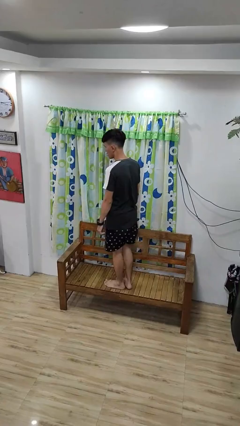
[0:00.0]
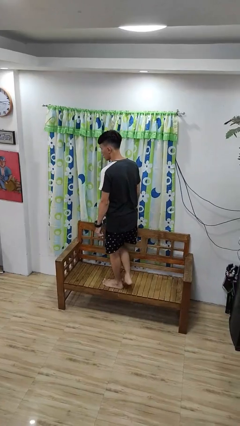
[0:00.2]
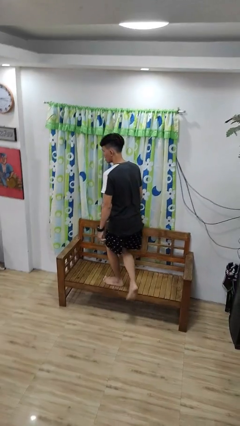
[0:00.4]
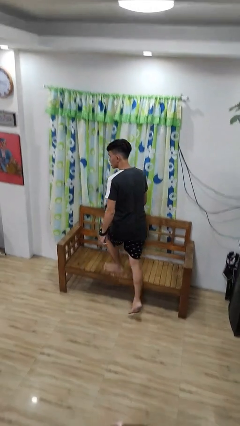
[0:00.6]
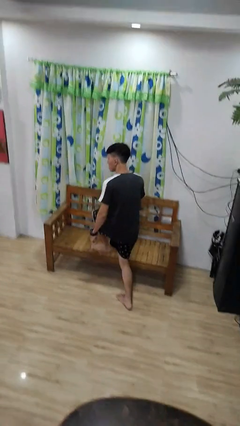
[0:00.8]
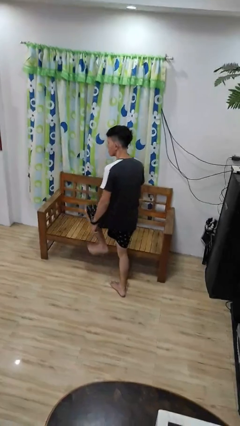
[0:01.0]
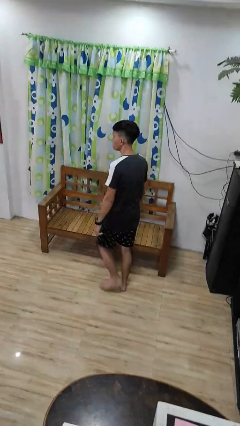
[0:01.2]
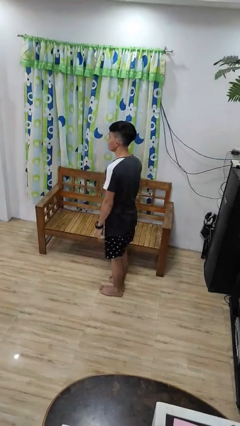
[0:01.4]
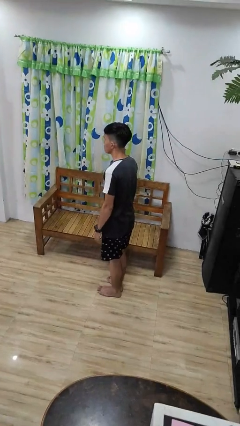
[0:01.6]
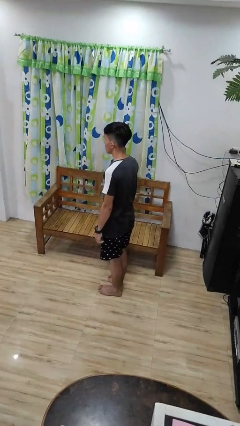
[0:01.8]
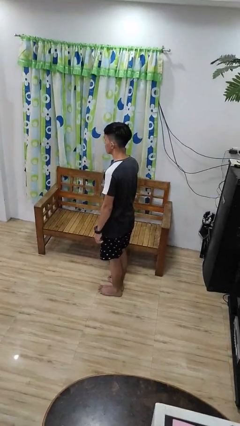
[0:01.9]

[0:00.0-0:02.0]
person climbs off couch

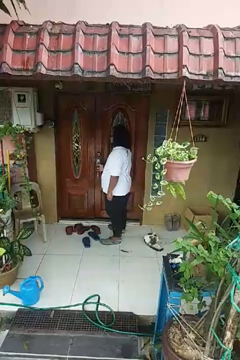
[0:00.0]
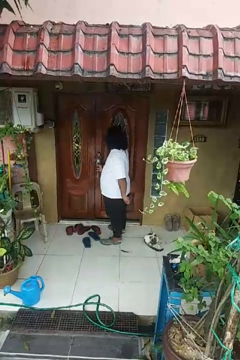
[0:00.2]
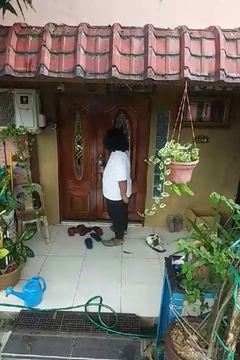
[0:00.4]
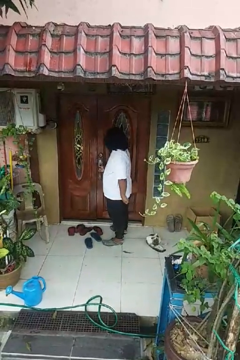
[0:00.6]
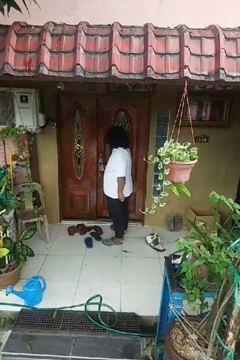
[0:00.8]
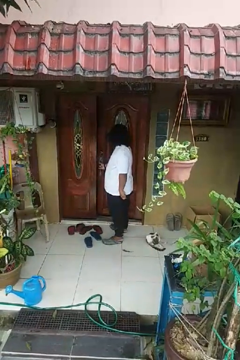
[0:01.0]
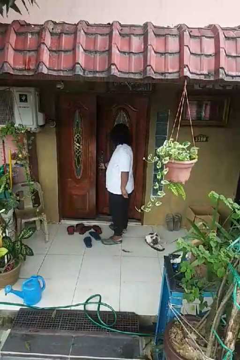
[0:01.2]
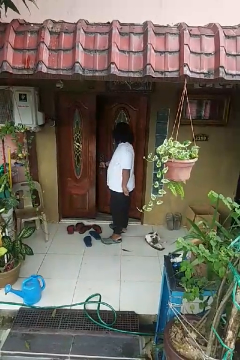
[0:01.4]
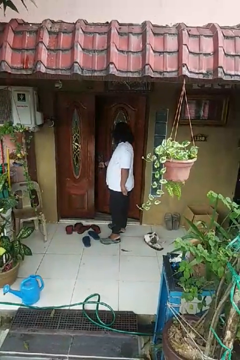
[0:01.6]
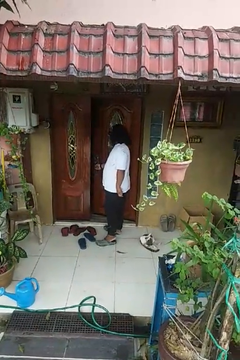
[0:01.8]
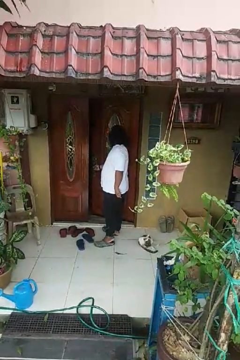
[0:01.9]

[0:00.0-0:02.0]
person opens facility door

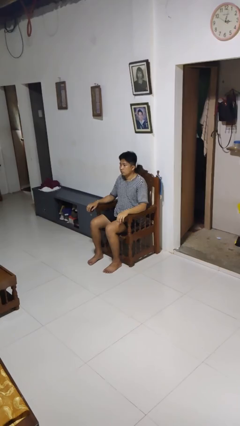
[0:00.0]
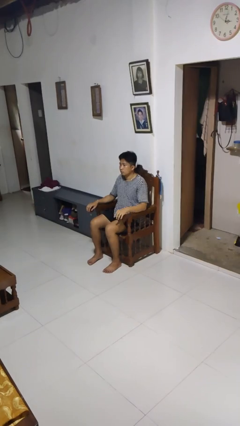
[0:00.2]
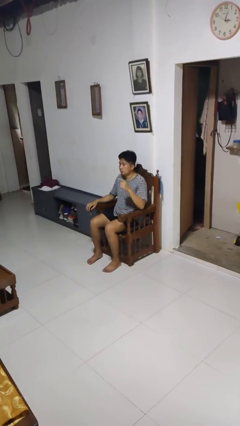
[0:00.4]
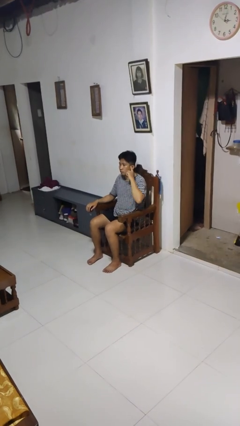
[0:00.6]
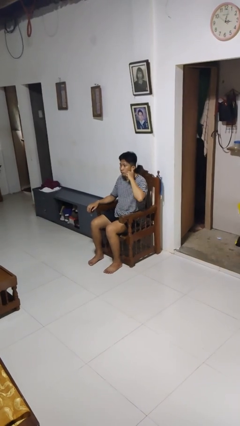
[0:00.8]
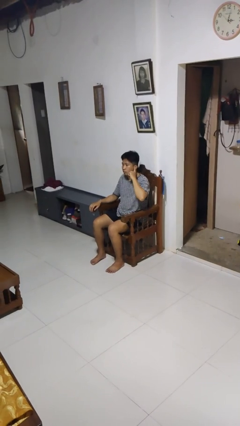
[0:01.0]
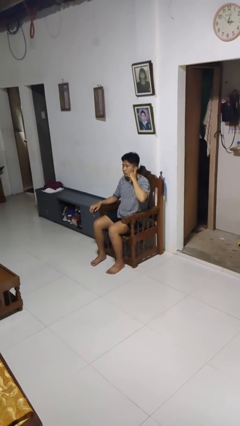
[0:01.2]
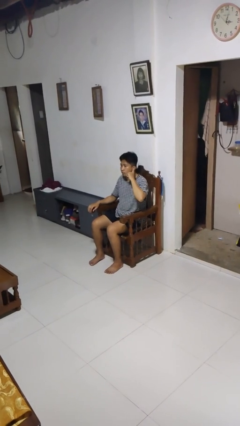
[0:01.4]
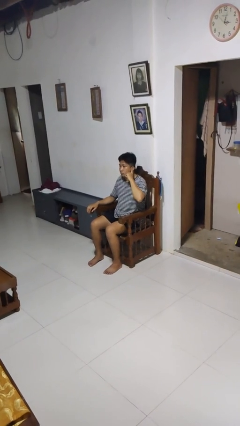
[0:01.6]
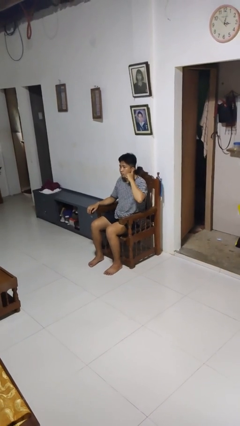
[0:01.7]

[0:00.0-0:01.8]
person gestures listen closely

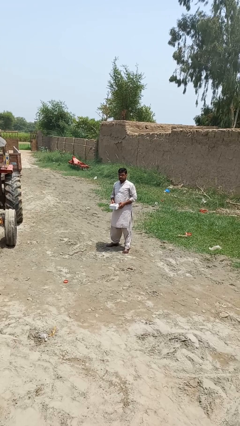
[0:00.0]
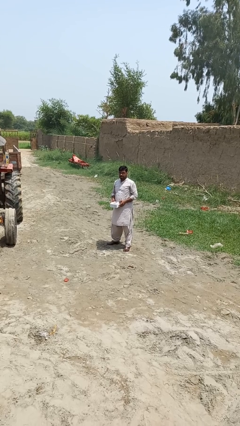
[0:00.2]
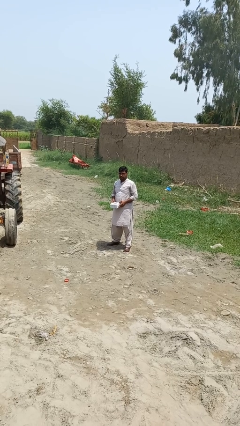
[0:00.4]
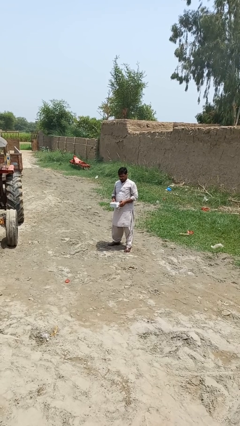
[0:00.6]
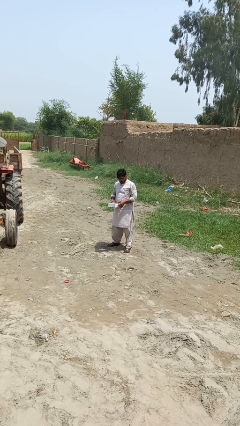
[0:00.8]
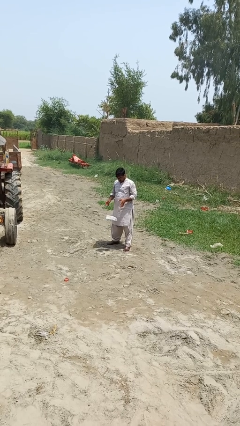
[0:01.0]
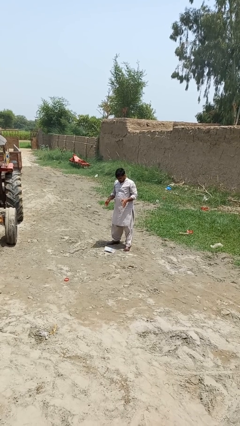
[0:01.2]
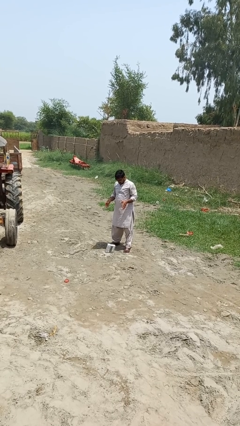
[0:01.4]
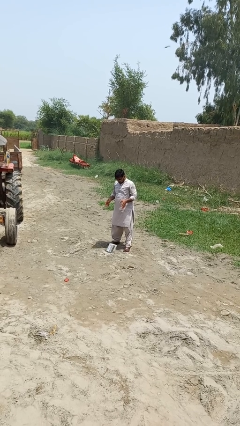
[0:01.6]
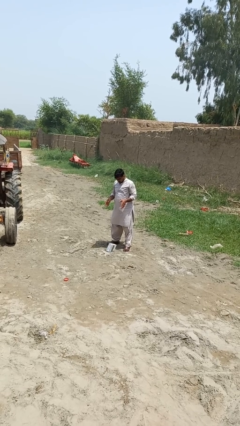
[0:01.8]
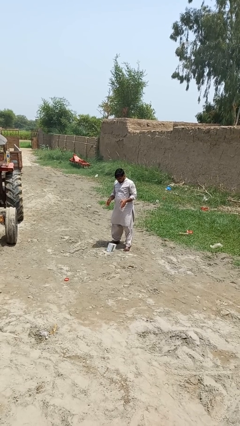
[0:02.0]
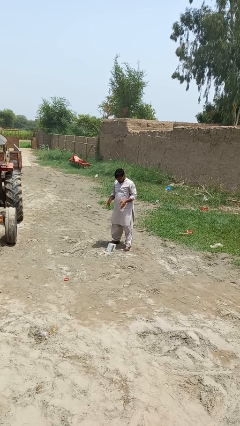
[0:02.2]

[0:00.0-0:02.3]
person drops object

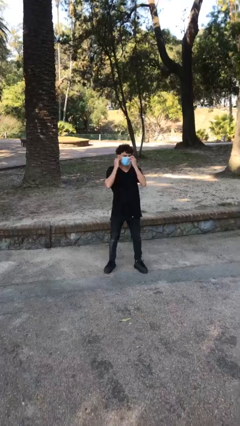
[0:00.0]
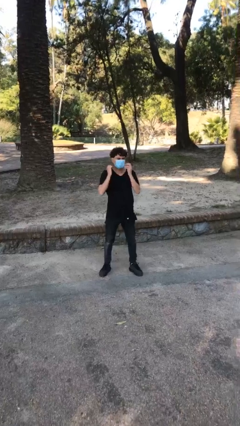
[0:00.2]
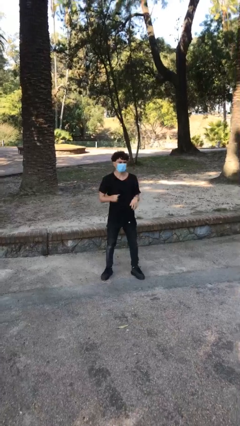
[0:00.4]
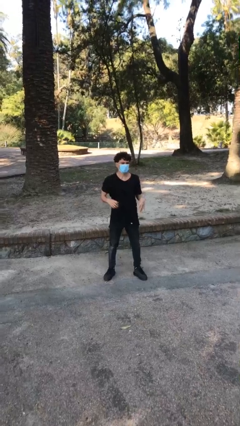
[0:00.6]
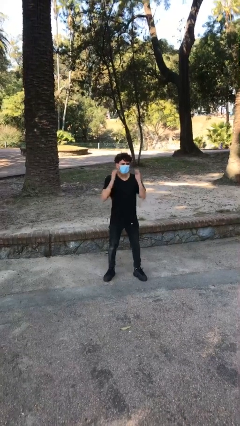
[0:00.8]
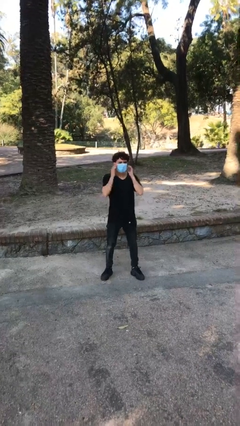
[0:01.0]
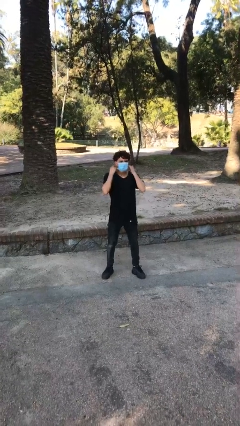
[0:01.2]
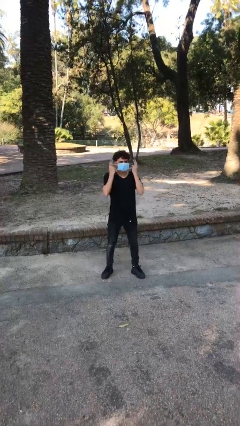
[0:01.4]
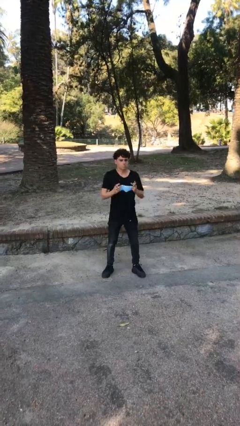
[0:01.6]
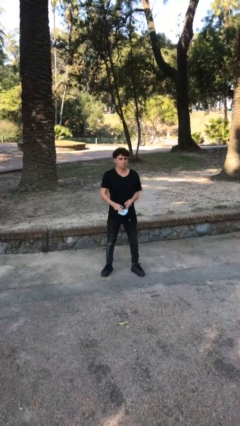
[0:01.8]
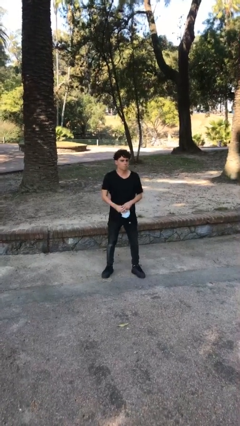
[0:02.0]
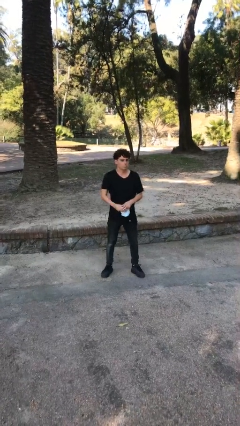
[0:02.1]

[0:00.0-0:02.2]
person takes off facemask

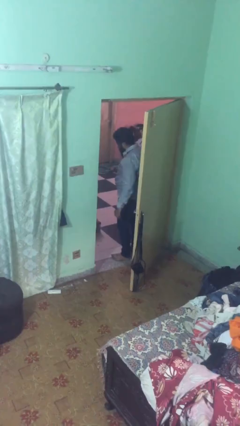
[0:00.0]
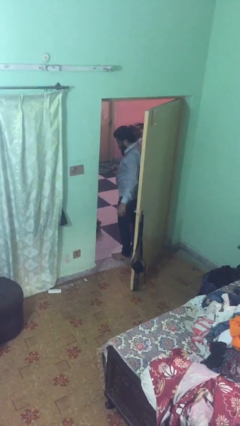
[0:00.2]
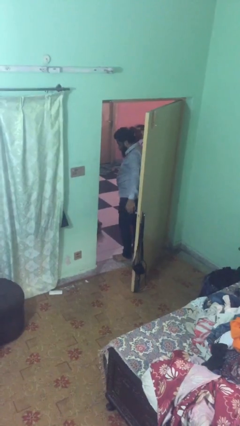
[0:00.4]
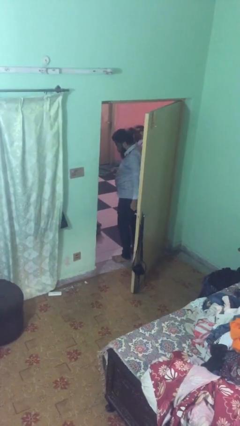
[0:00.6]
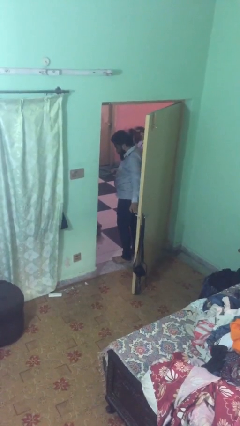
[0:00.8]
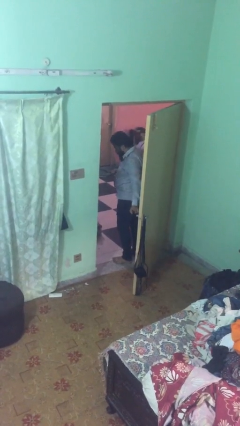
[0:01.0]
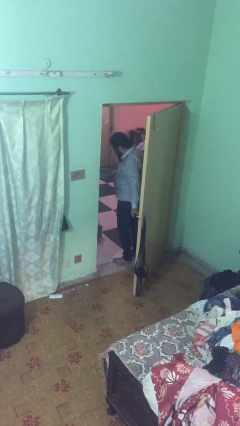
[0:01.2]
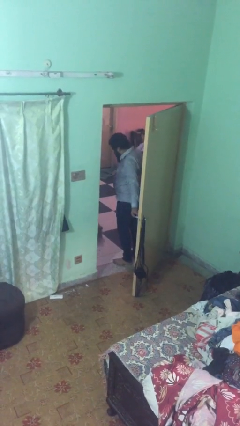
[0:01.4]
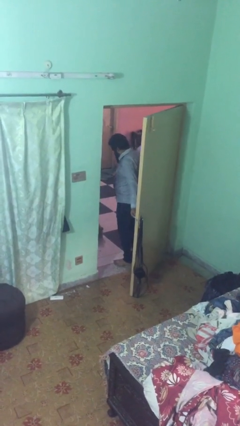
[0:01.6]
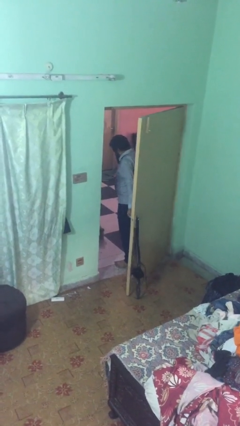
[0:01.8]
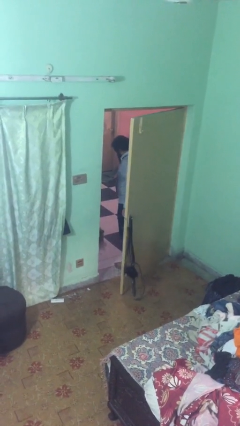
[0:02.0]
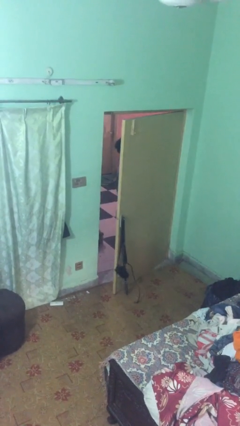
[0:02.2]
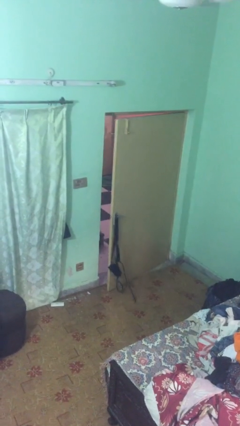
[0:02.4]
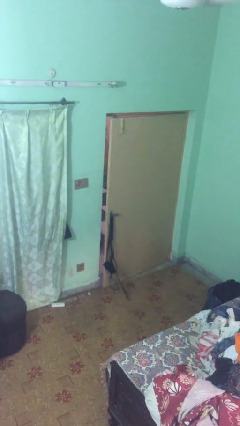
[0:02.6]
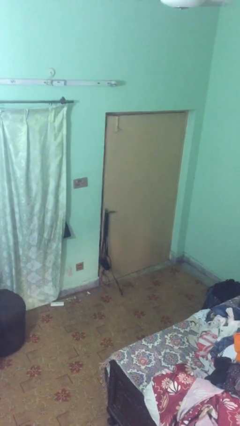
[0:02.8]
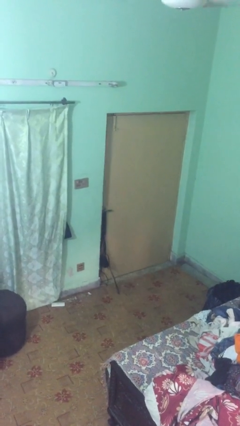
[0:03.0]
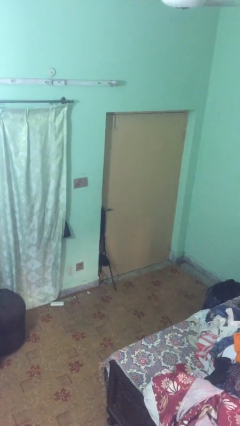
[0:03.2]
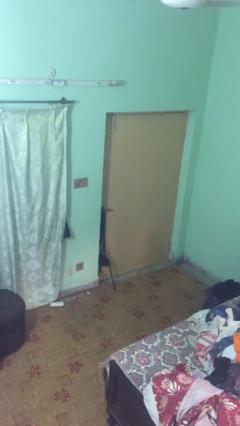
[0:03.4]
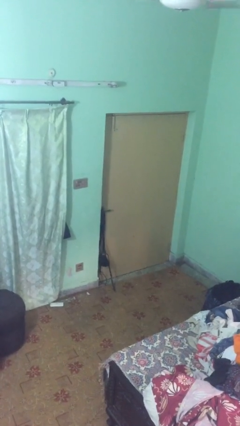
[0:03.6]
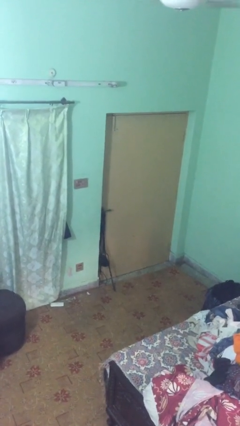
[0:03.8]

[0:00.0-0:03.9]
person closes facility door

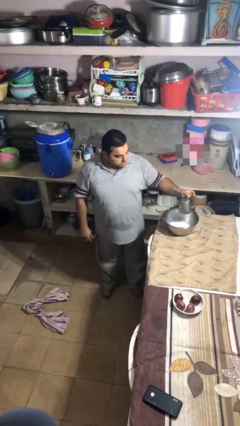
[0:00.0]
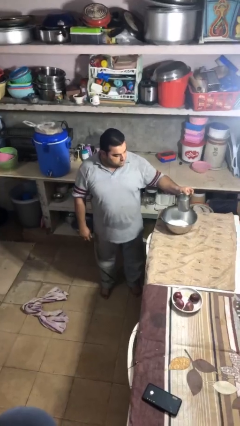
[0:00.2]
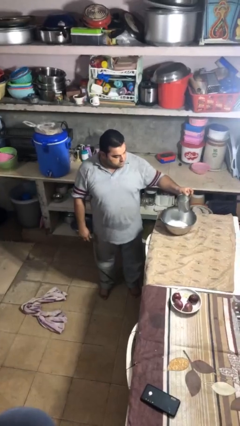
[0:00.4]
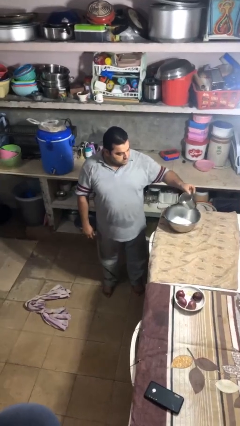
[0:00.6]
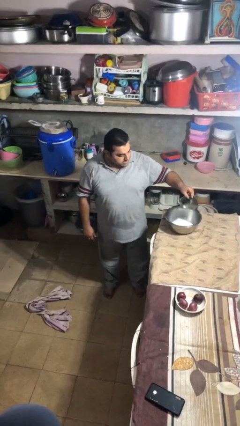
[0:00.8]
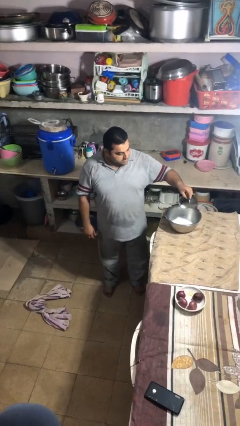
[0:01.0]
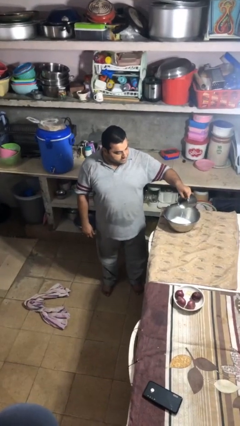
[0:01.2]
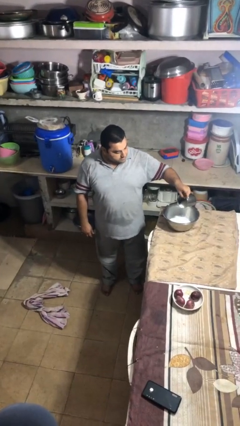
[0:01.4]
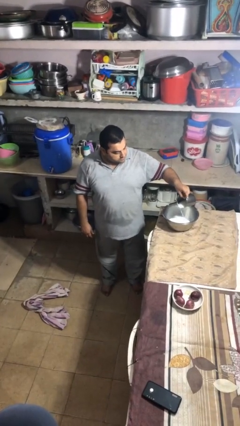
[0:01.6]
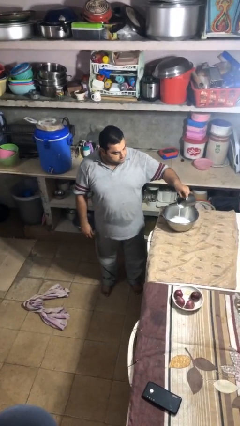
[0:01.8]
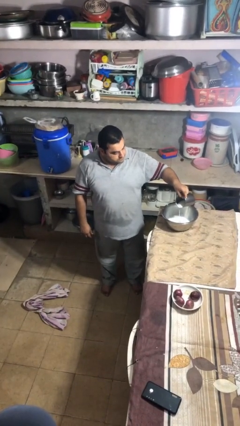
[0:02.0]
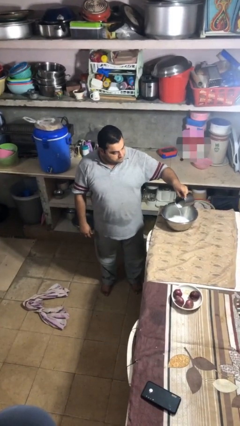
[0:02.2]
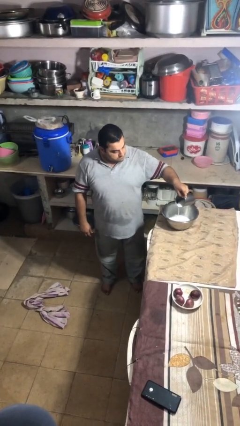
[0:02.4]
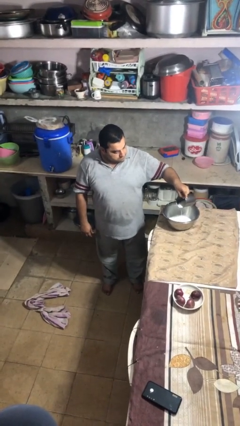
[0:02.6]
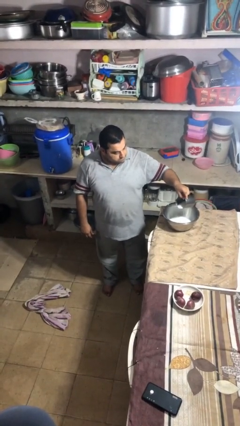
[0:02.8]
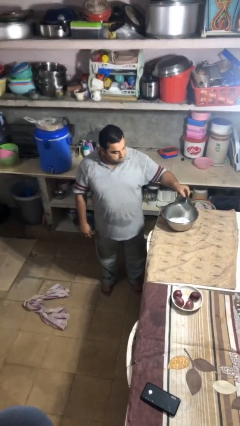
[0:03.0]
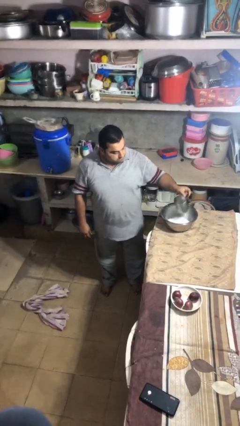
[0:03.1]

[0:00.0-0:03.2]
person pours into bowl
